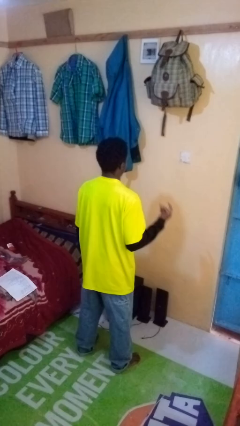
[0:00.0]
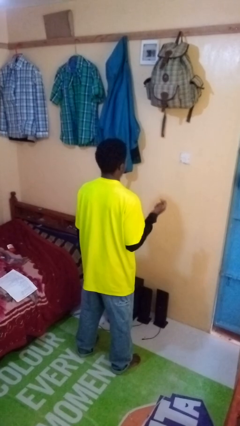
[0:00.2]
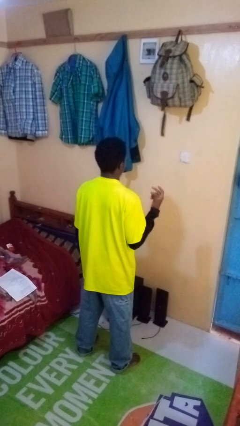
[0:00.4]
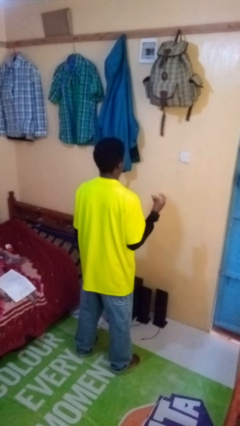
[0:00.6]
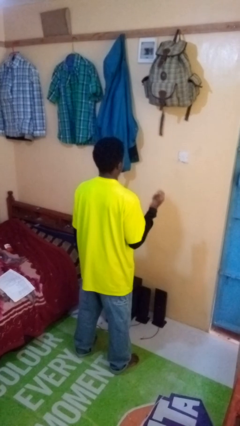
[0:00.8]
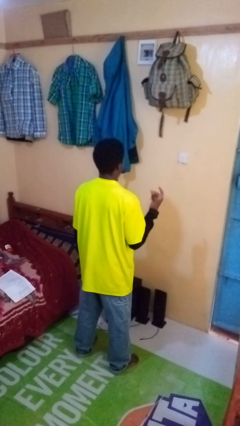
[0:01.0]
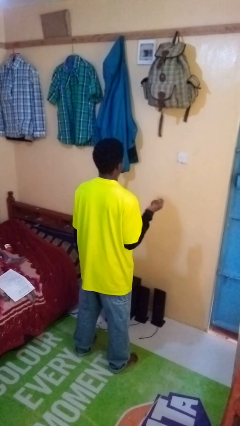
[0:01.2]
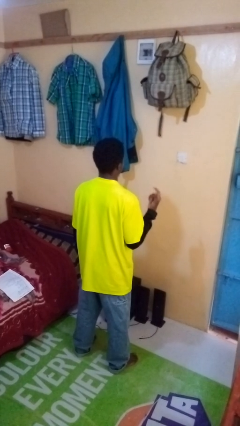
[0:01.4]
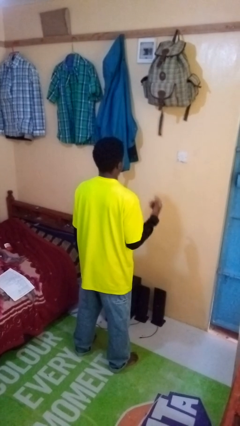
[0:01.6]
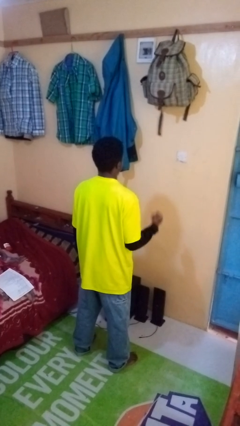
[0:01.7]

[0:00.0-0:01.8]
person snaps fingers

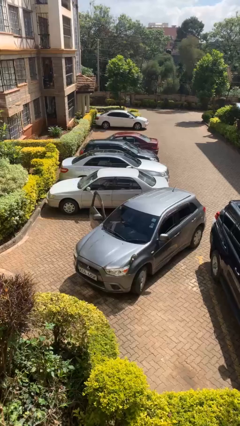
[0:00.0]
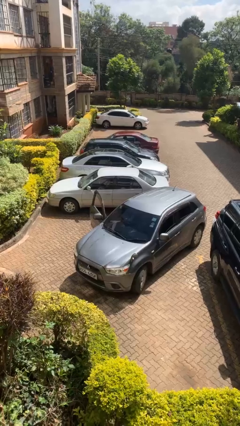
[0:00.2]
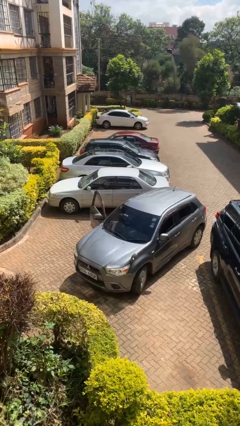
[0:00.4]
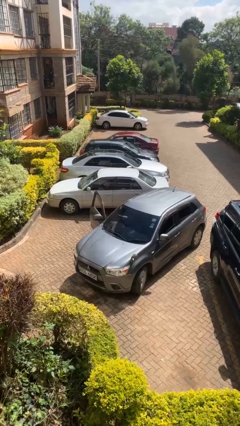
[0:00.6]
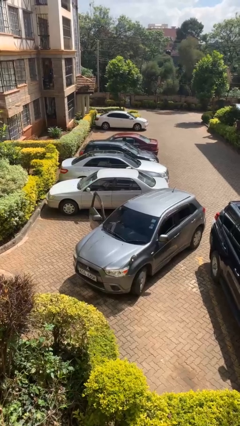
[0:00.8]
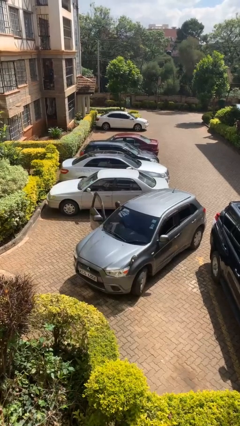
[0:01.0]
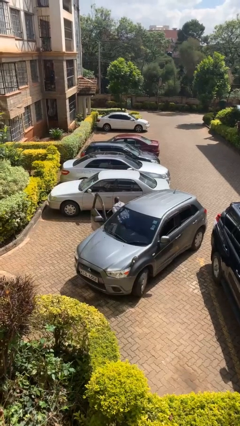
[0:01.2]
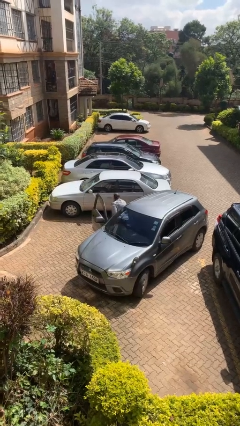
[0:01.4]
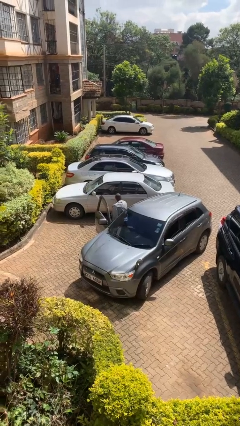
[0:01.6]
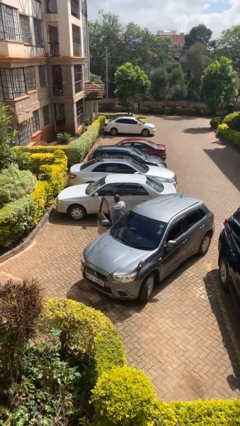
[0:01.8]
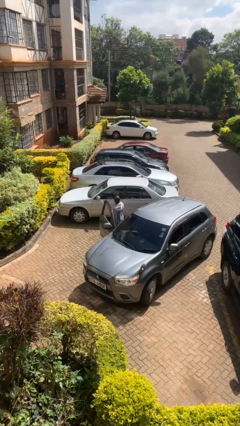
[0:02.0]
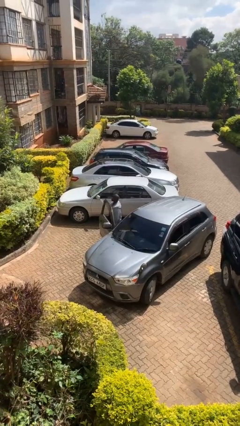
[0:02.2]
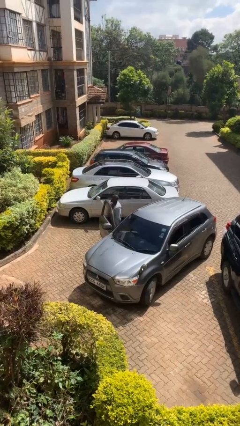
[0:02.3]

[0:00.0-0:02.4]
person exits car

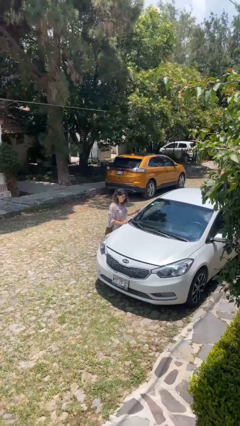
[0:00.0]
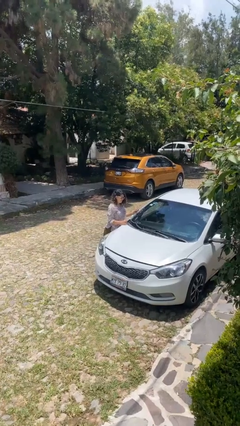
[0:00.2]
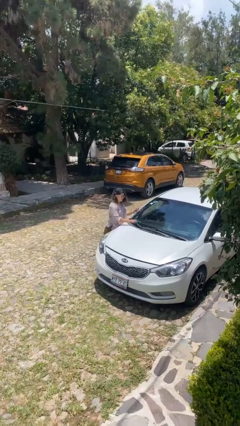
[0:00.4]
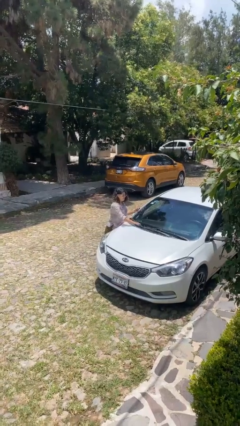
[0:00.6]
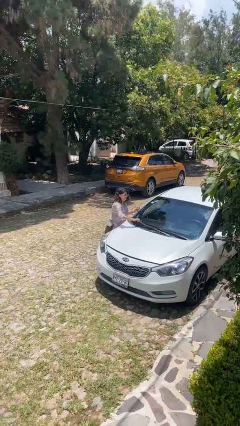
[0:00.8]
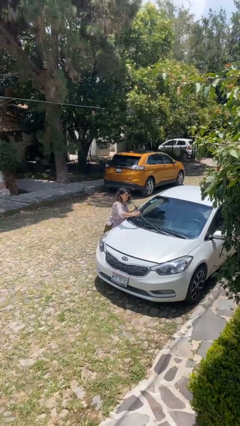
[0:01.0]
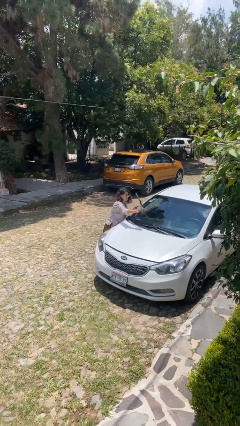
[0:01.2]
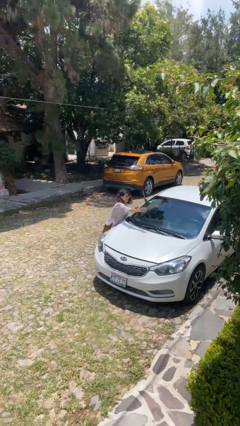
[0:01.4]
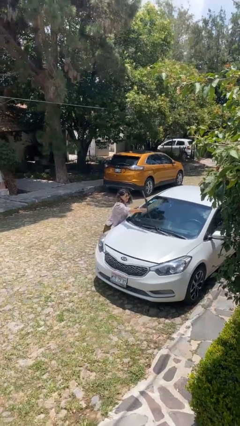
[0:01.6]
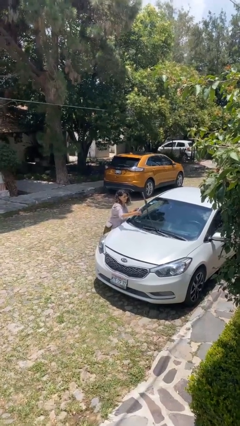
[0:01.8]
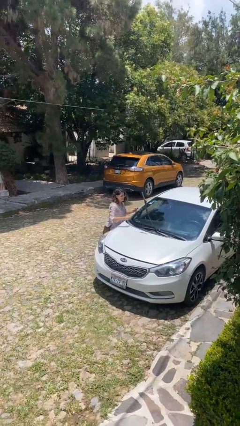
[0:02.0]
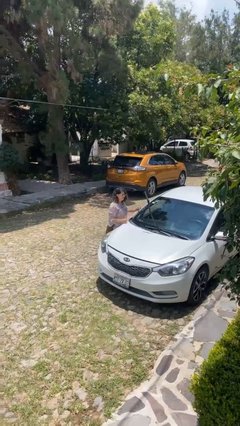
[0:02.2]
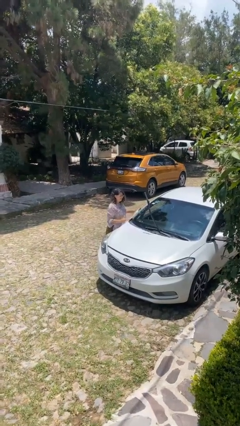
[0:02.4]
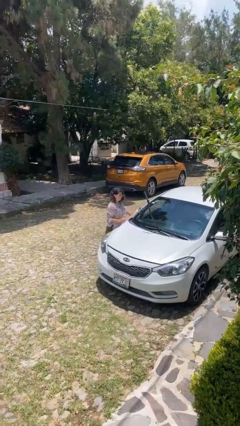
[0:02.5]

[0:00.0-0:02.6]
person flips up car wipers

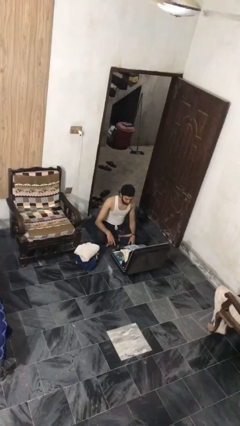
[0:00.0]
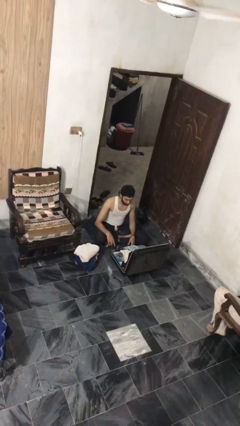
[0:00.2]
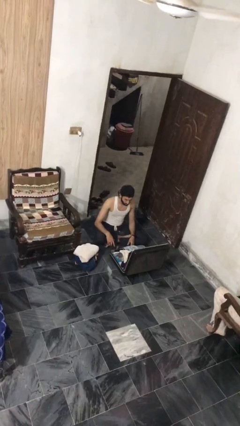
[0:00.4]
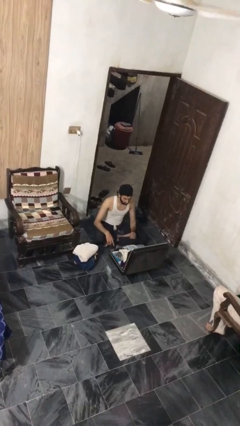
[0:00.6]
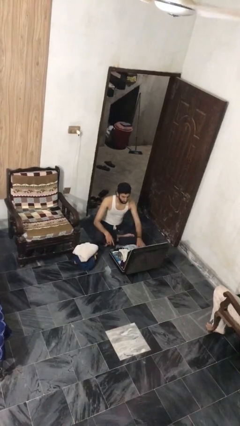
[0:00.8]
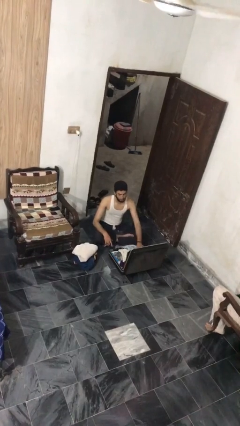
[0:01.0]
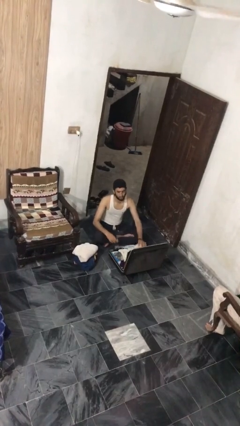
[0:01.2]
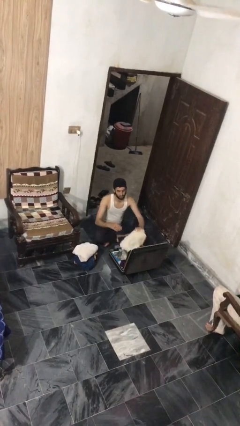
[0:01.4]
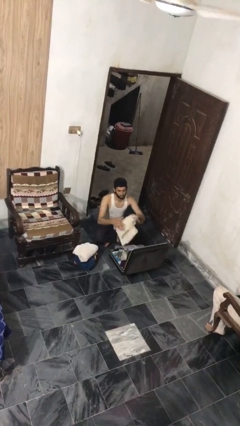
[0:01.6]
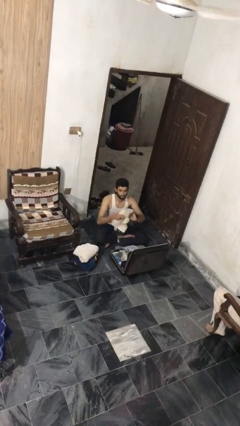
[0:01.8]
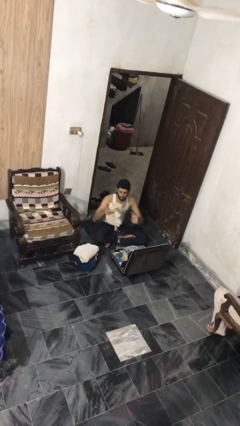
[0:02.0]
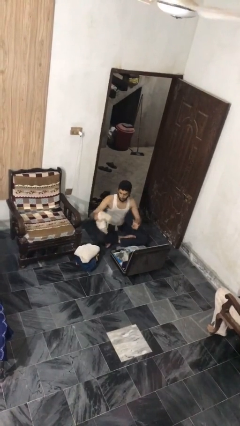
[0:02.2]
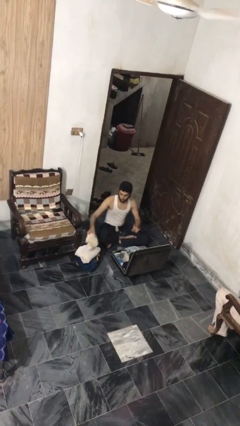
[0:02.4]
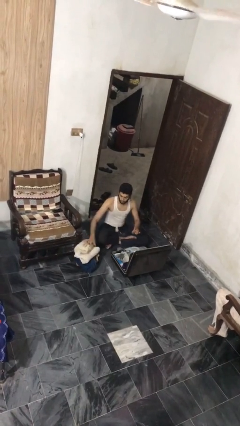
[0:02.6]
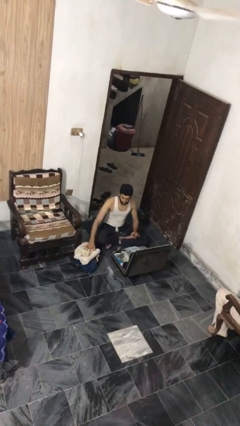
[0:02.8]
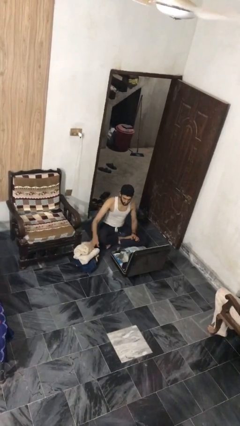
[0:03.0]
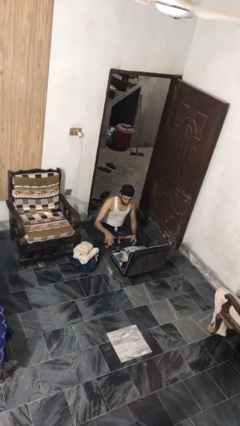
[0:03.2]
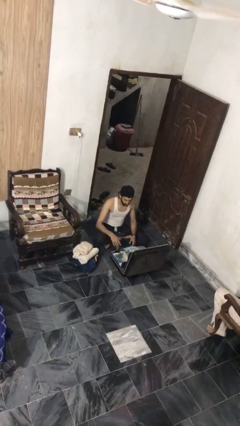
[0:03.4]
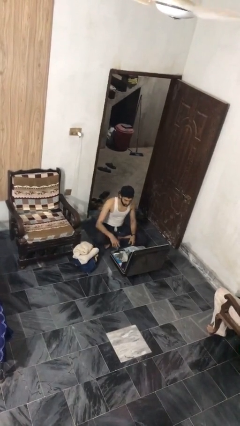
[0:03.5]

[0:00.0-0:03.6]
person unloads clothes from suitcase

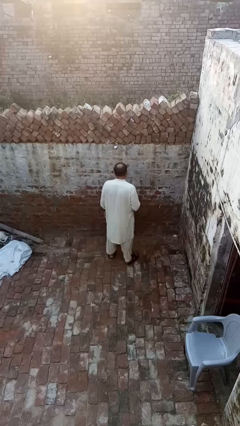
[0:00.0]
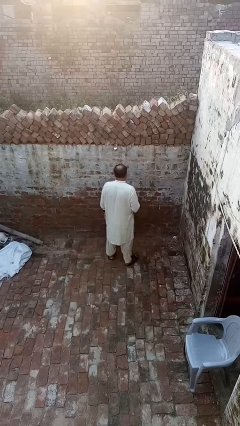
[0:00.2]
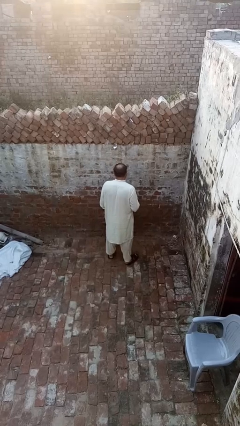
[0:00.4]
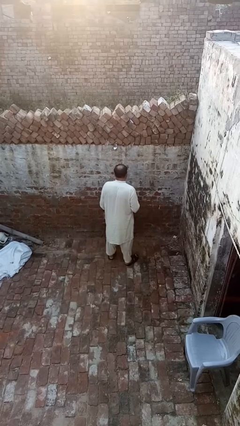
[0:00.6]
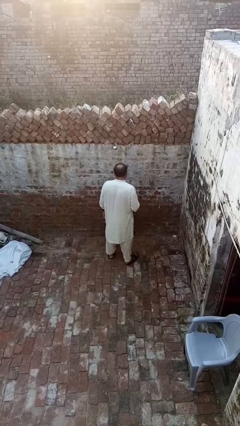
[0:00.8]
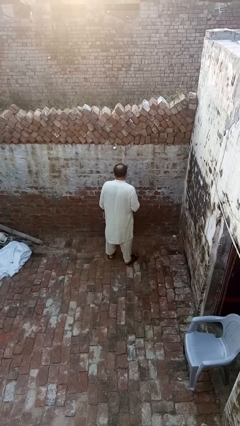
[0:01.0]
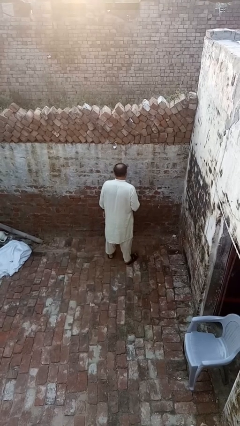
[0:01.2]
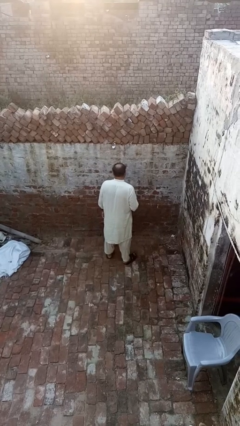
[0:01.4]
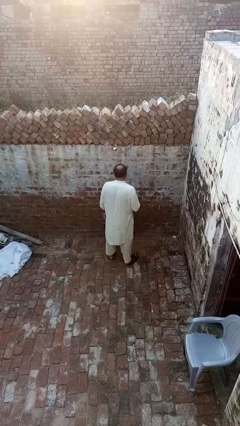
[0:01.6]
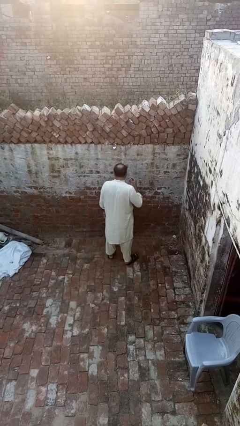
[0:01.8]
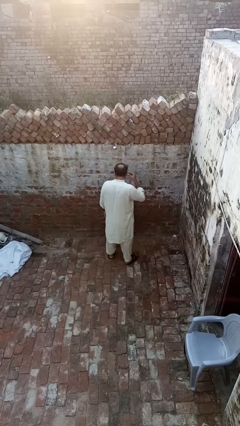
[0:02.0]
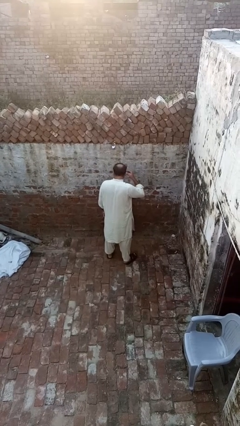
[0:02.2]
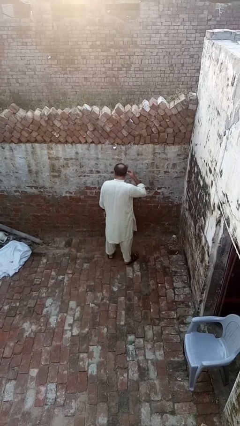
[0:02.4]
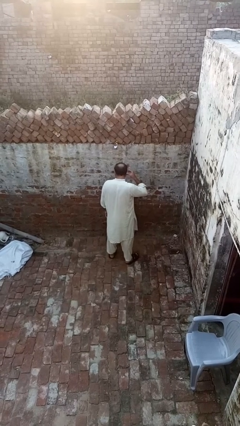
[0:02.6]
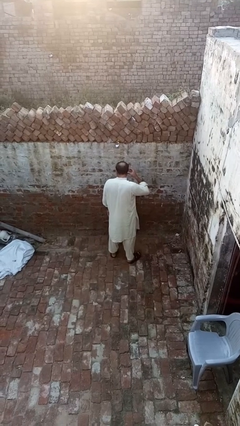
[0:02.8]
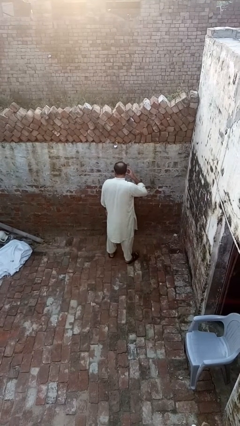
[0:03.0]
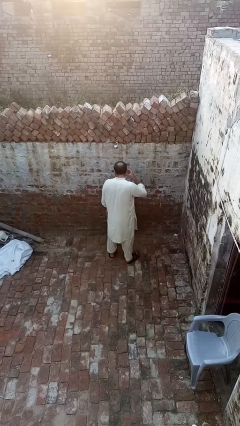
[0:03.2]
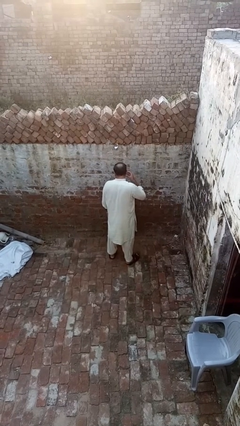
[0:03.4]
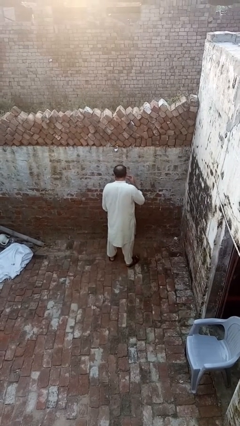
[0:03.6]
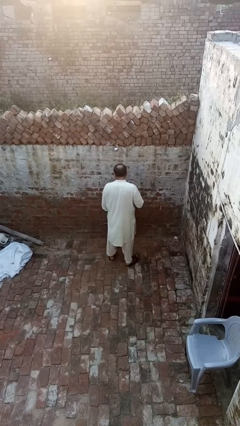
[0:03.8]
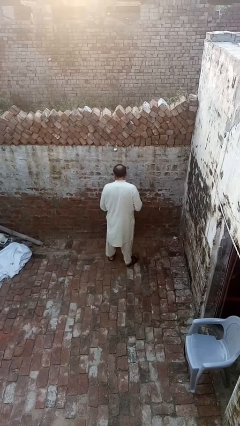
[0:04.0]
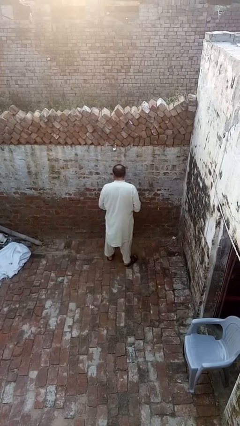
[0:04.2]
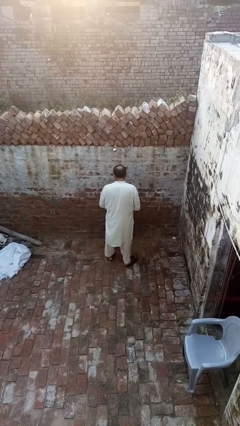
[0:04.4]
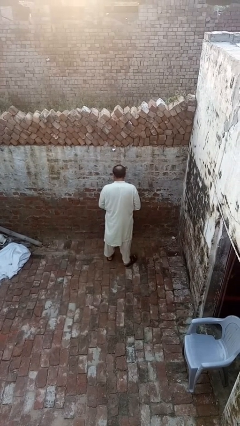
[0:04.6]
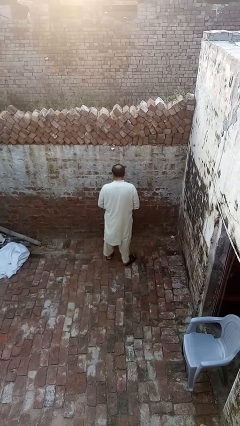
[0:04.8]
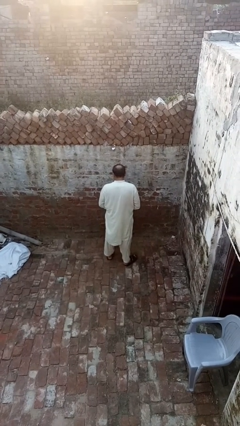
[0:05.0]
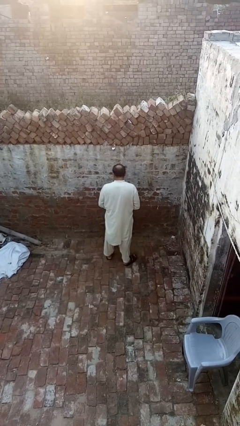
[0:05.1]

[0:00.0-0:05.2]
person puts on earrings

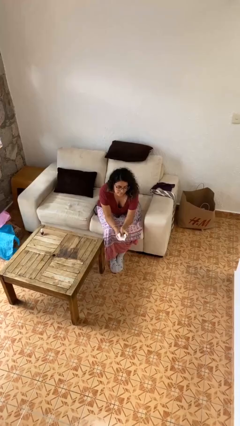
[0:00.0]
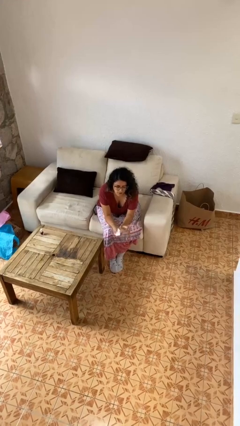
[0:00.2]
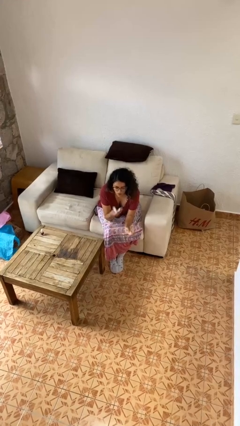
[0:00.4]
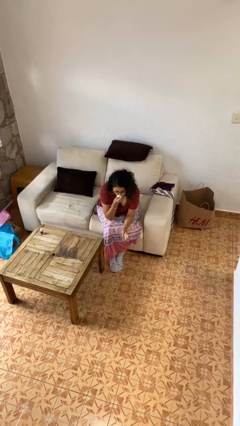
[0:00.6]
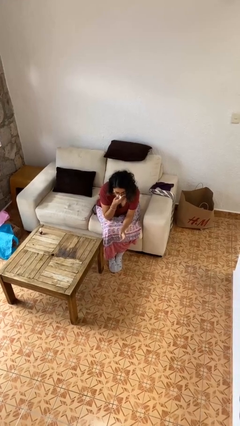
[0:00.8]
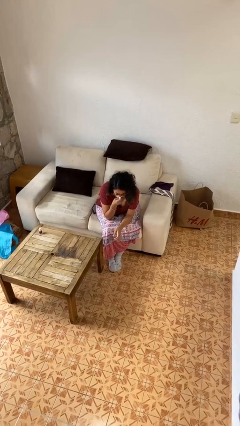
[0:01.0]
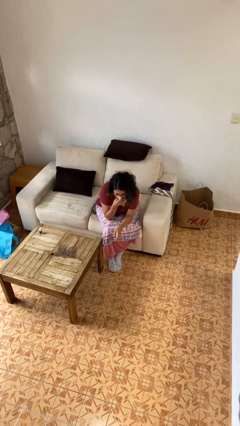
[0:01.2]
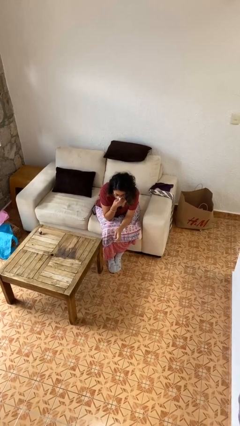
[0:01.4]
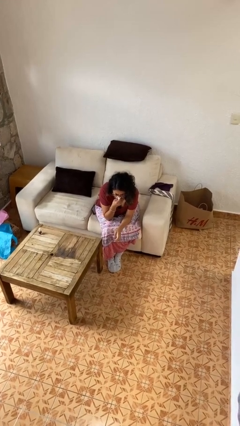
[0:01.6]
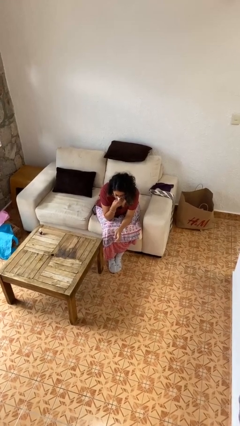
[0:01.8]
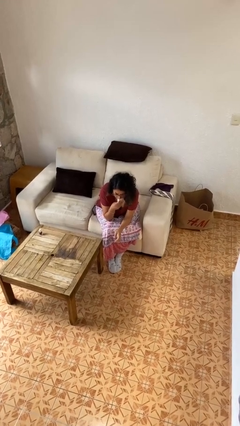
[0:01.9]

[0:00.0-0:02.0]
person blows nose
